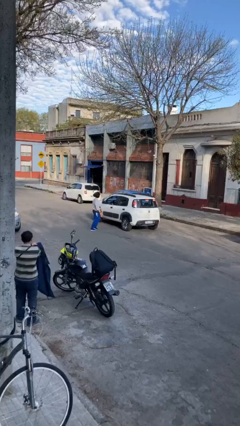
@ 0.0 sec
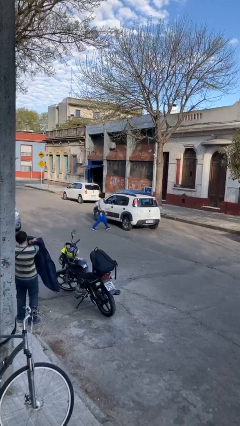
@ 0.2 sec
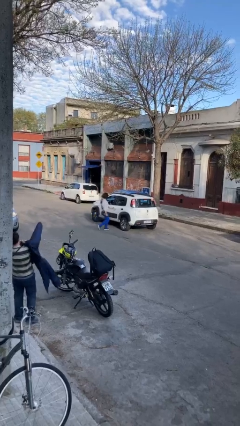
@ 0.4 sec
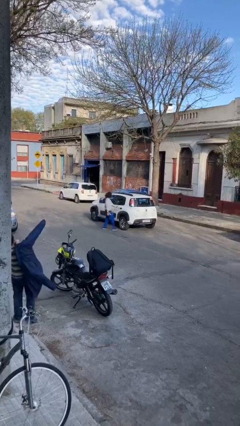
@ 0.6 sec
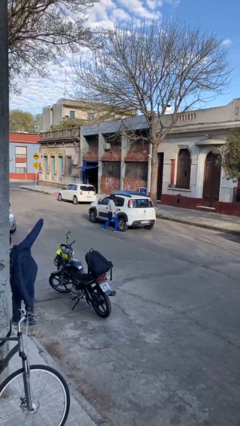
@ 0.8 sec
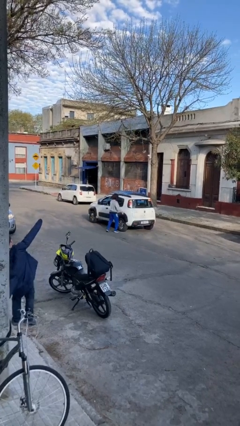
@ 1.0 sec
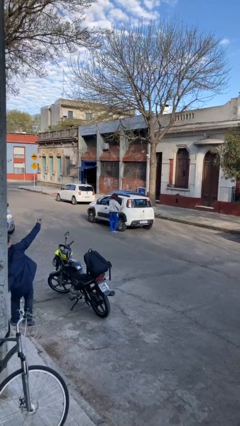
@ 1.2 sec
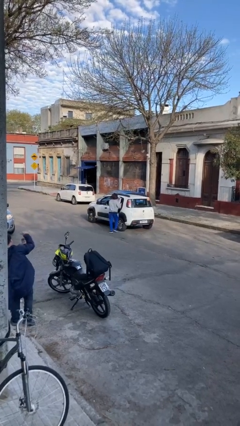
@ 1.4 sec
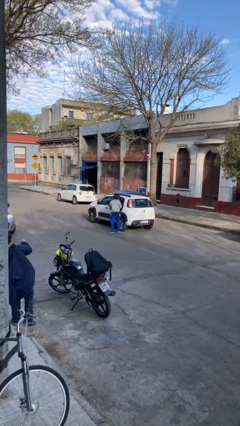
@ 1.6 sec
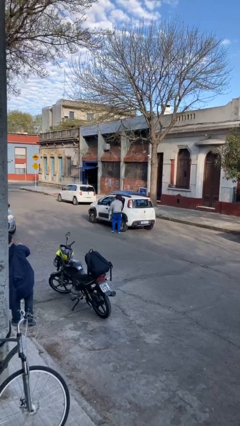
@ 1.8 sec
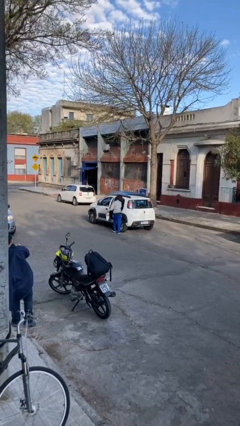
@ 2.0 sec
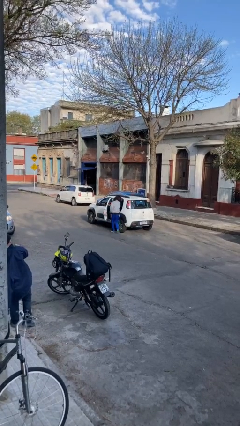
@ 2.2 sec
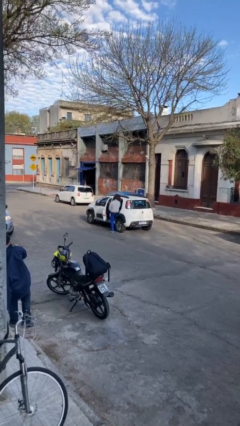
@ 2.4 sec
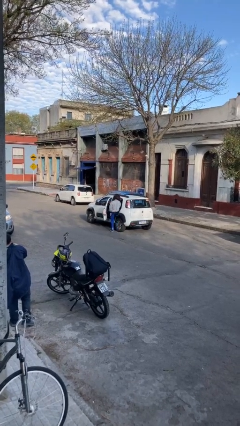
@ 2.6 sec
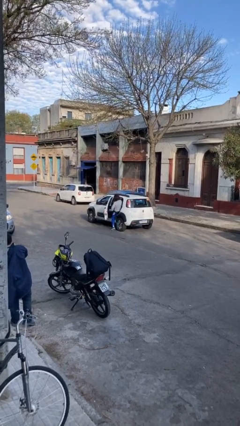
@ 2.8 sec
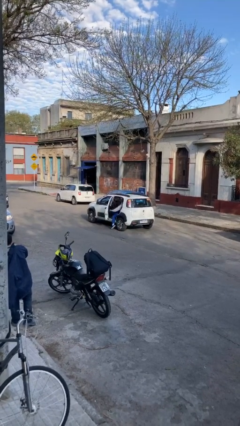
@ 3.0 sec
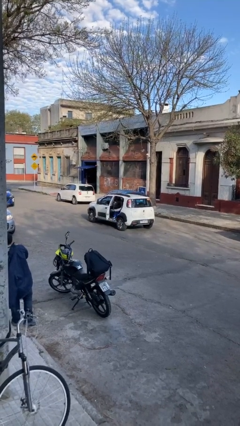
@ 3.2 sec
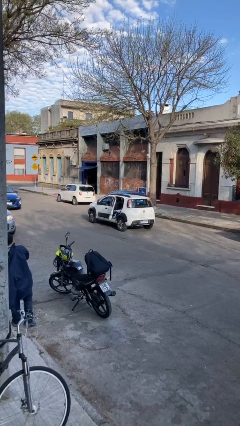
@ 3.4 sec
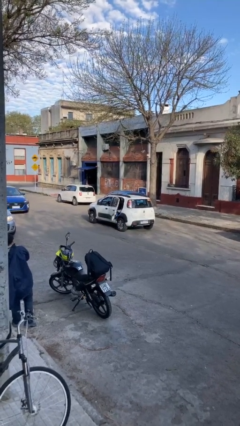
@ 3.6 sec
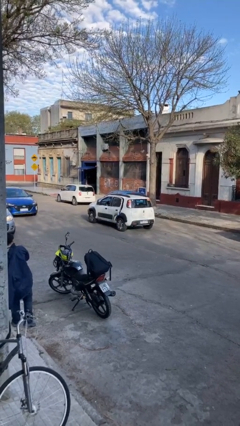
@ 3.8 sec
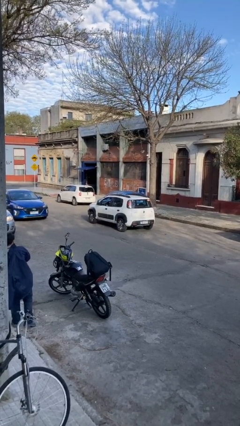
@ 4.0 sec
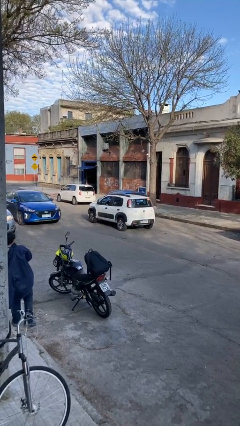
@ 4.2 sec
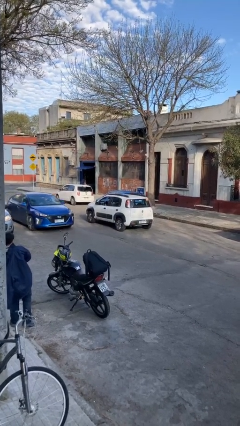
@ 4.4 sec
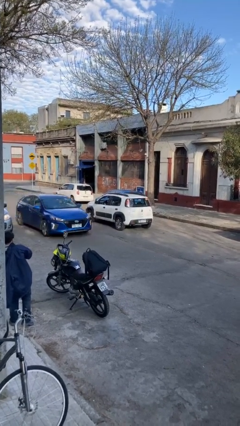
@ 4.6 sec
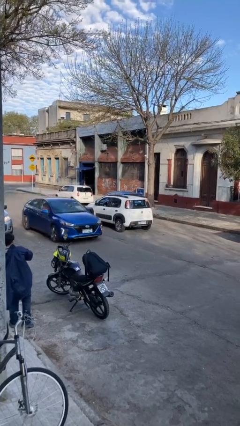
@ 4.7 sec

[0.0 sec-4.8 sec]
car picks up person

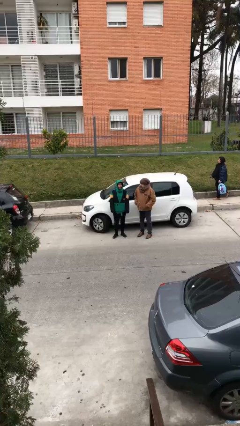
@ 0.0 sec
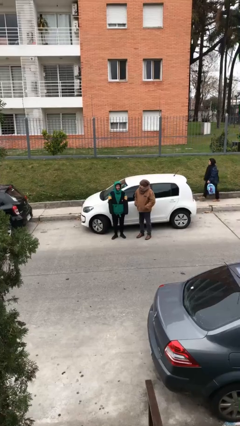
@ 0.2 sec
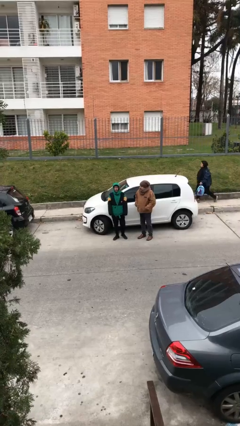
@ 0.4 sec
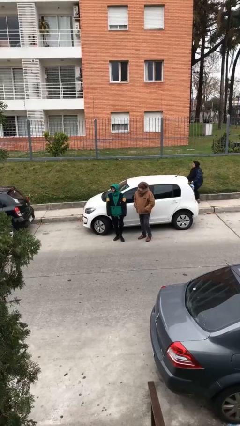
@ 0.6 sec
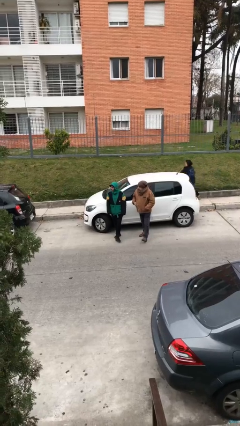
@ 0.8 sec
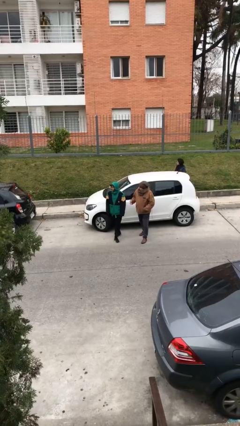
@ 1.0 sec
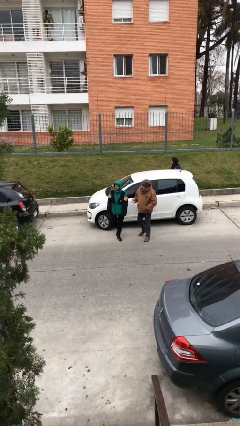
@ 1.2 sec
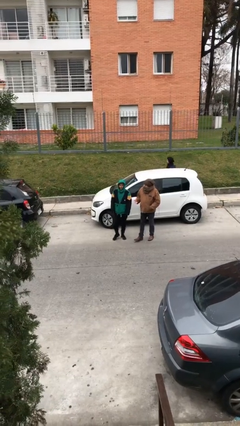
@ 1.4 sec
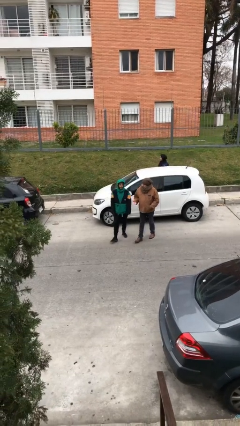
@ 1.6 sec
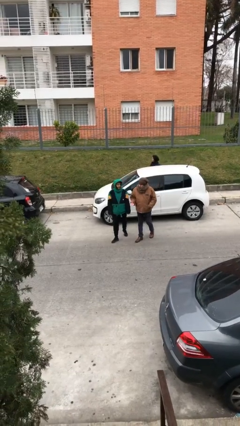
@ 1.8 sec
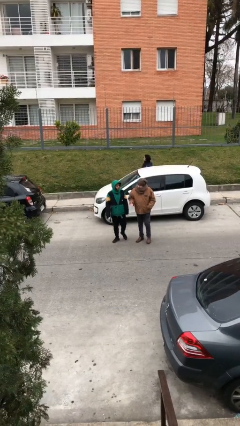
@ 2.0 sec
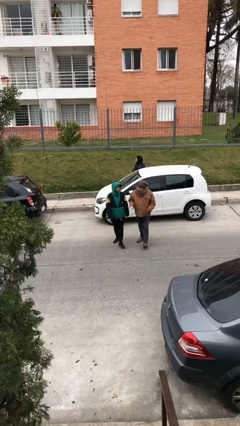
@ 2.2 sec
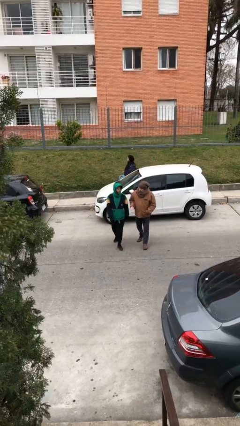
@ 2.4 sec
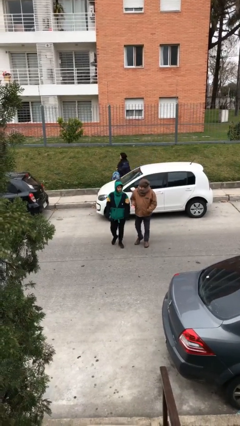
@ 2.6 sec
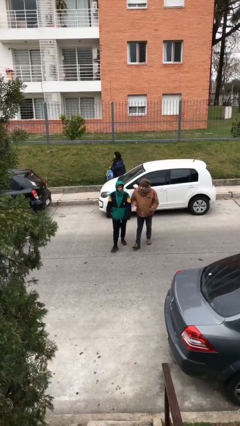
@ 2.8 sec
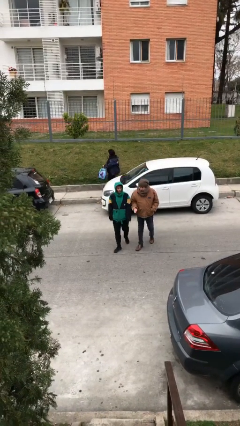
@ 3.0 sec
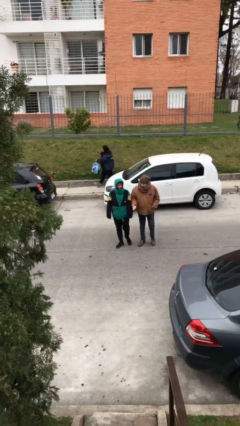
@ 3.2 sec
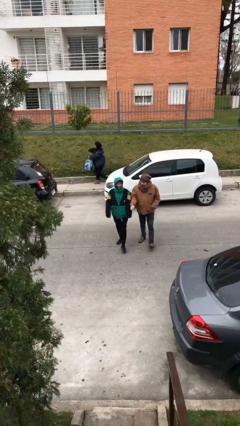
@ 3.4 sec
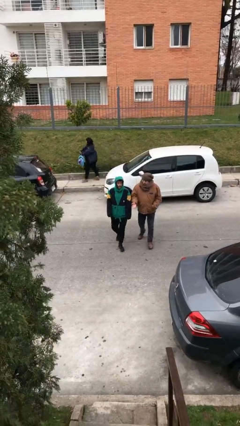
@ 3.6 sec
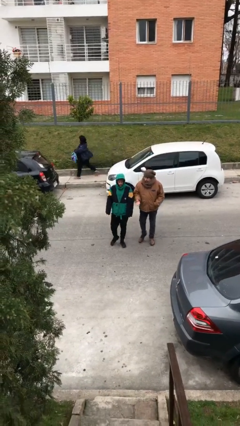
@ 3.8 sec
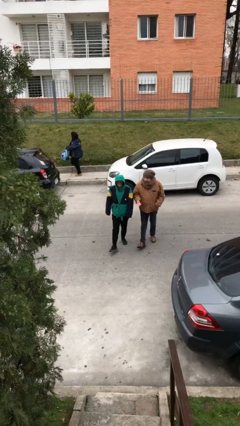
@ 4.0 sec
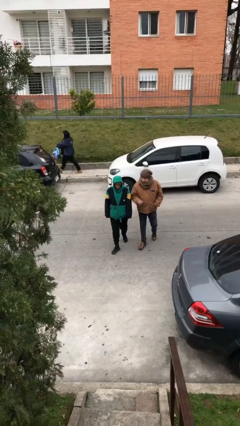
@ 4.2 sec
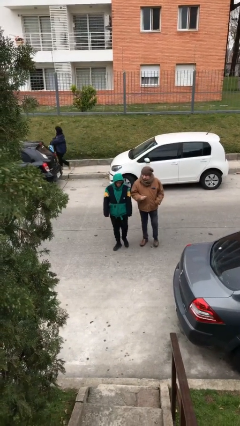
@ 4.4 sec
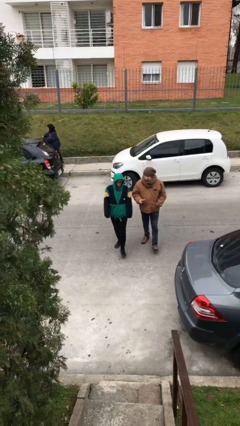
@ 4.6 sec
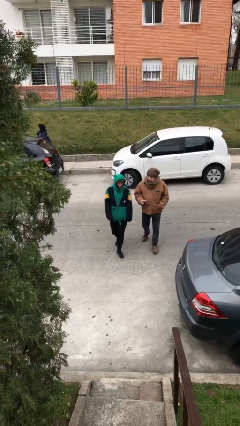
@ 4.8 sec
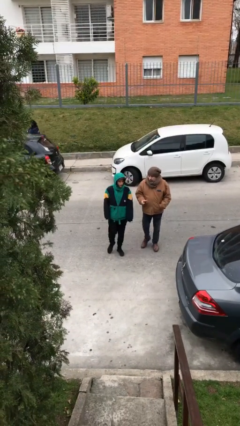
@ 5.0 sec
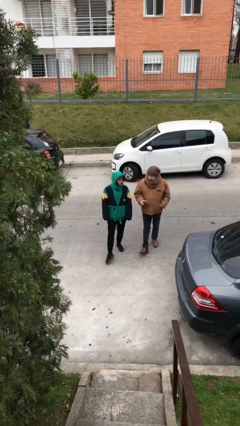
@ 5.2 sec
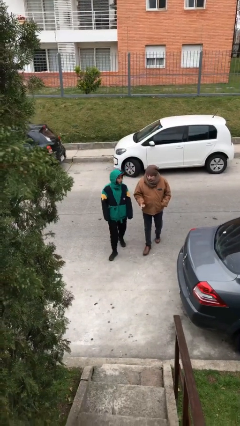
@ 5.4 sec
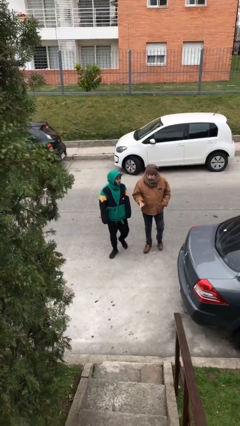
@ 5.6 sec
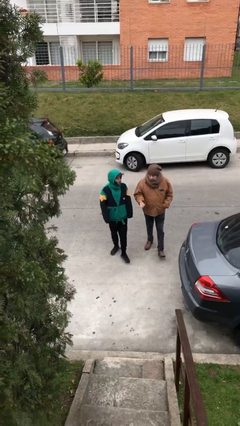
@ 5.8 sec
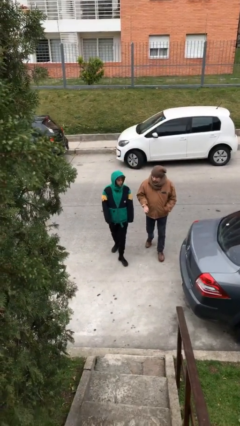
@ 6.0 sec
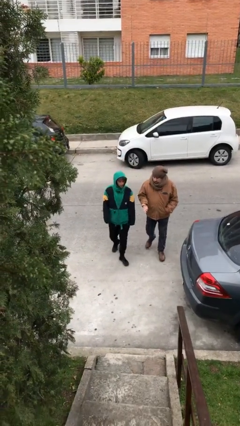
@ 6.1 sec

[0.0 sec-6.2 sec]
person talks to person

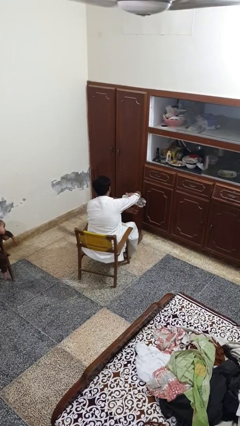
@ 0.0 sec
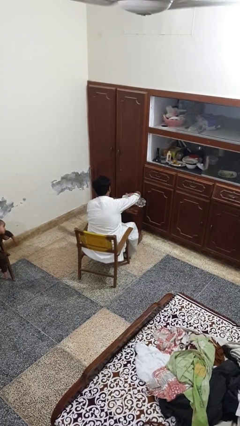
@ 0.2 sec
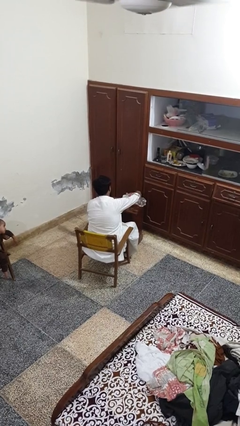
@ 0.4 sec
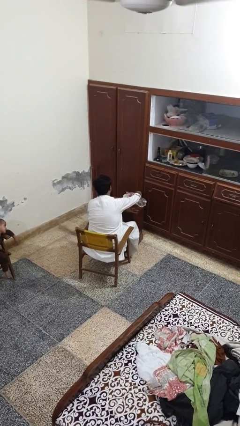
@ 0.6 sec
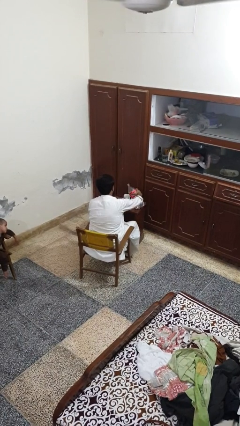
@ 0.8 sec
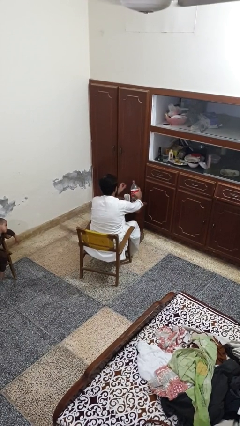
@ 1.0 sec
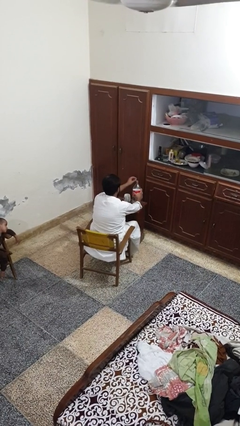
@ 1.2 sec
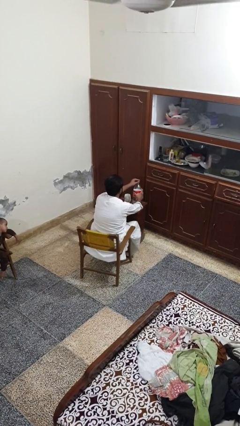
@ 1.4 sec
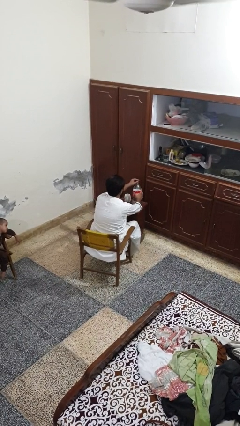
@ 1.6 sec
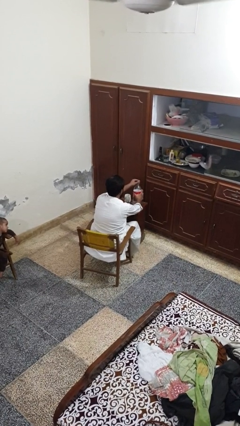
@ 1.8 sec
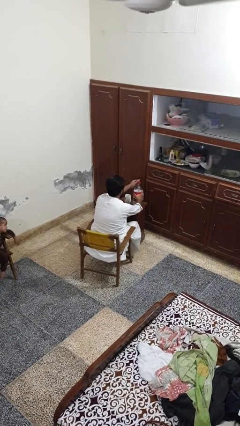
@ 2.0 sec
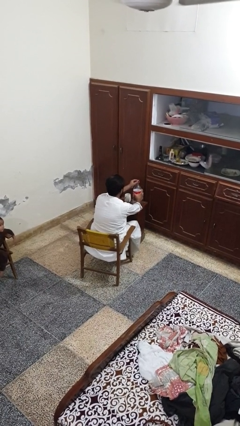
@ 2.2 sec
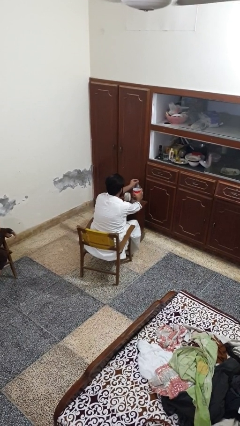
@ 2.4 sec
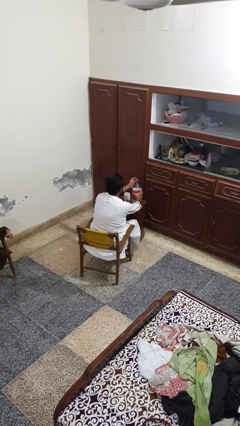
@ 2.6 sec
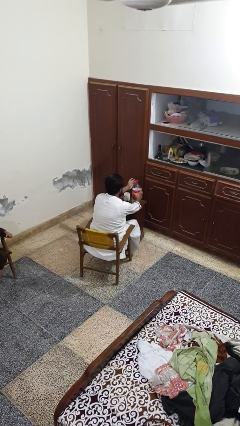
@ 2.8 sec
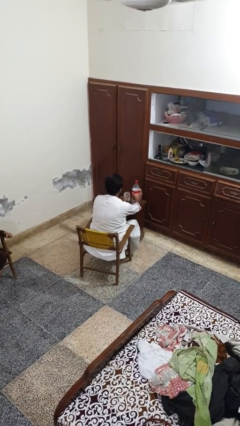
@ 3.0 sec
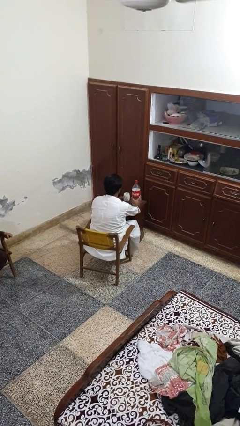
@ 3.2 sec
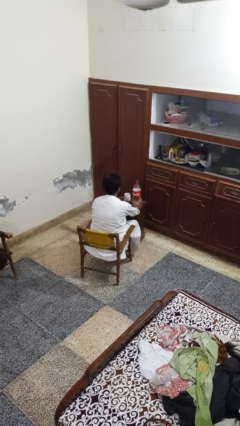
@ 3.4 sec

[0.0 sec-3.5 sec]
person screws lid to bottle

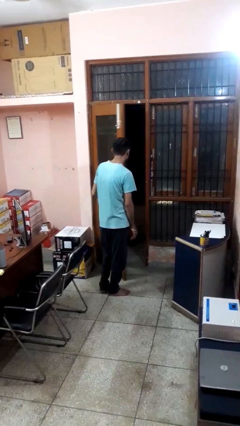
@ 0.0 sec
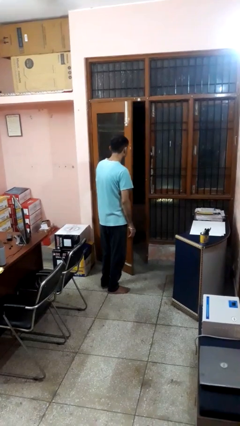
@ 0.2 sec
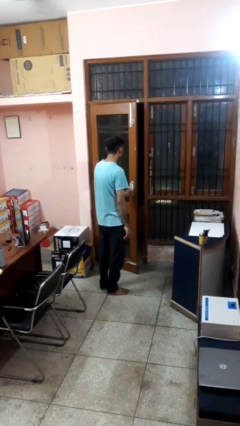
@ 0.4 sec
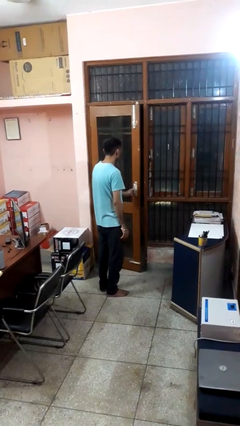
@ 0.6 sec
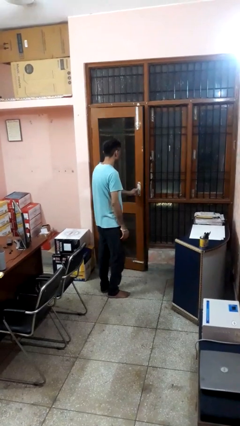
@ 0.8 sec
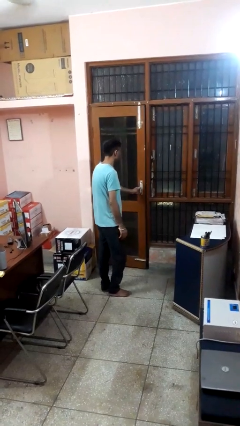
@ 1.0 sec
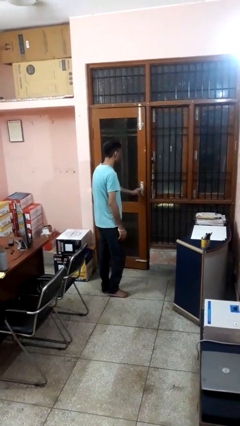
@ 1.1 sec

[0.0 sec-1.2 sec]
person closes facility door

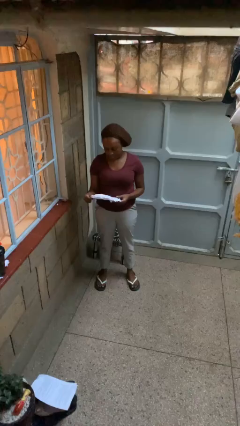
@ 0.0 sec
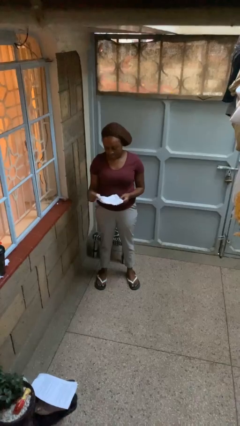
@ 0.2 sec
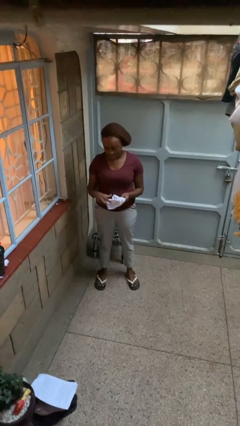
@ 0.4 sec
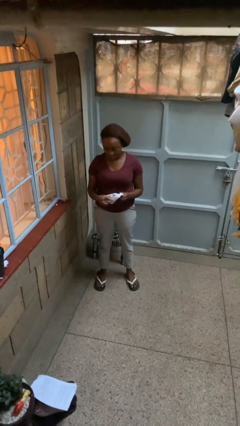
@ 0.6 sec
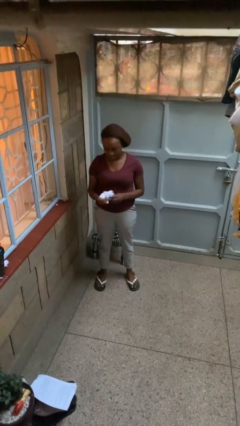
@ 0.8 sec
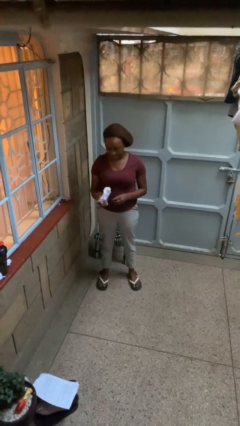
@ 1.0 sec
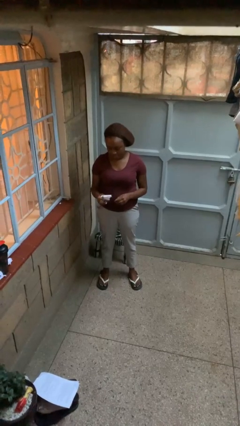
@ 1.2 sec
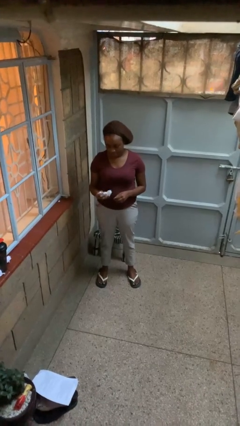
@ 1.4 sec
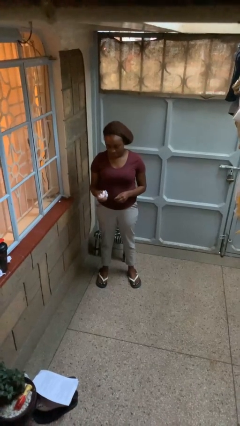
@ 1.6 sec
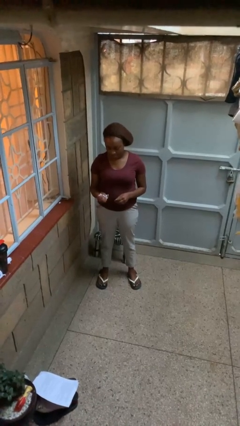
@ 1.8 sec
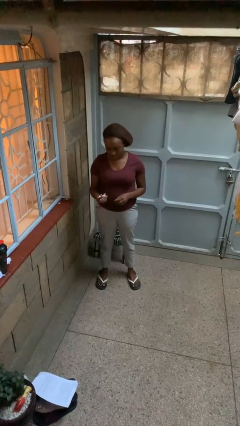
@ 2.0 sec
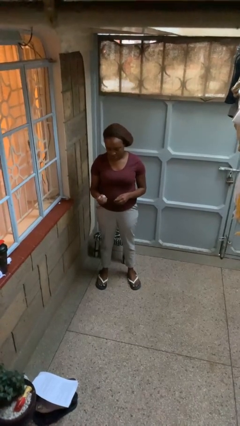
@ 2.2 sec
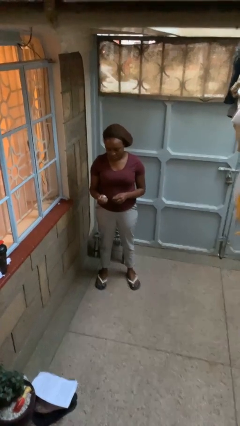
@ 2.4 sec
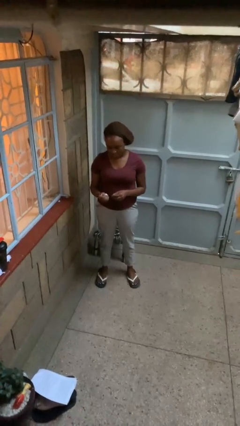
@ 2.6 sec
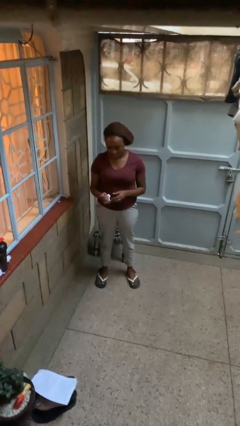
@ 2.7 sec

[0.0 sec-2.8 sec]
person crumples paper
